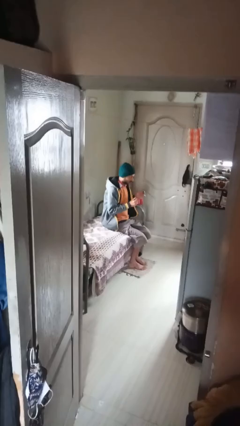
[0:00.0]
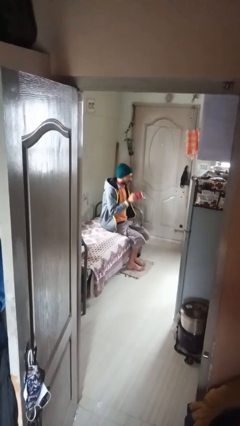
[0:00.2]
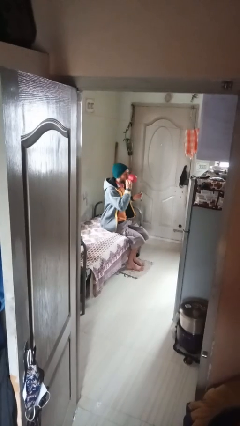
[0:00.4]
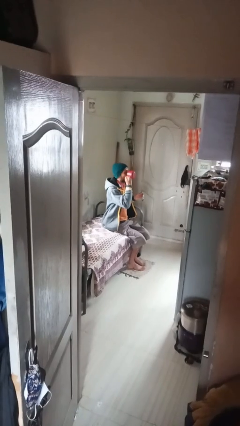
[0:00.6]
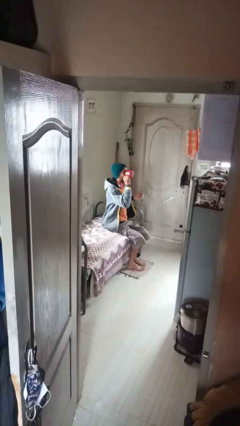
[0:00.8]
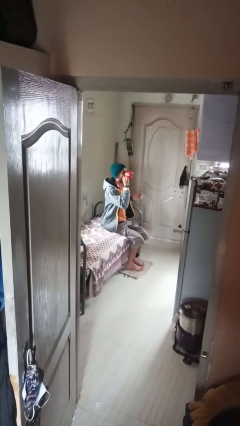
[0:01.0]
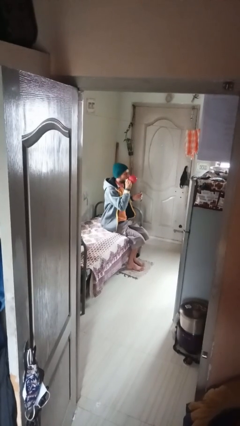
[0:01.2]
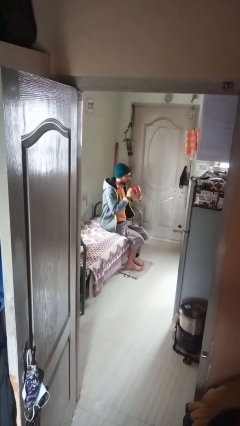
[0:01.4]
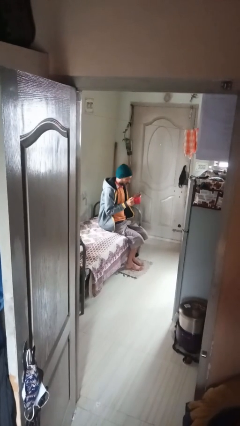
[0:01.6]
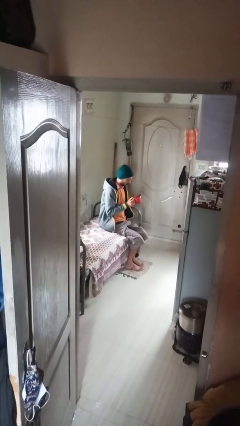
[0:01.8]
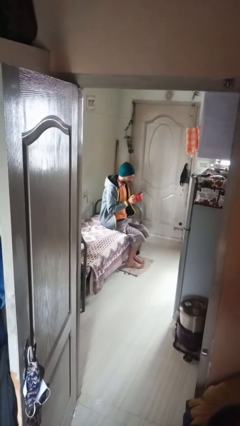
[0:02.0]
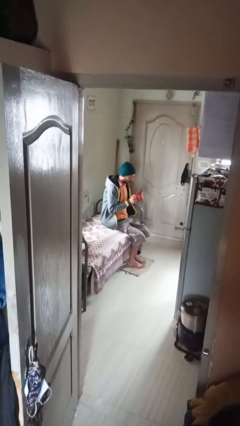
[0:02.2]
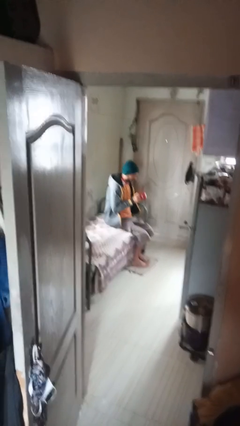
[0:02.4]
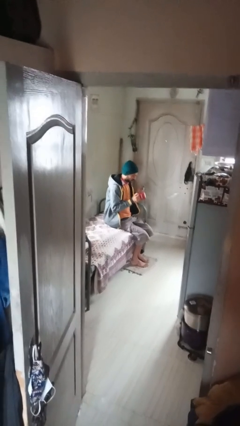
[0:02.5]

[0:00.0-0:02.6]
person drinks from mug

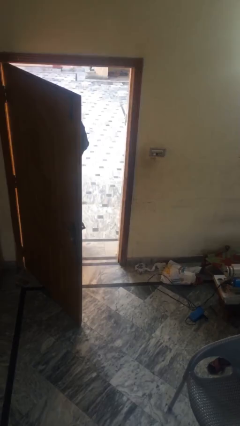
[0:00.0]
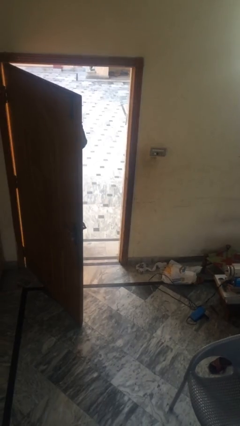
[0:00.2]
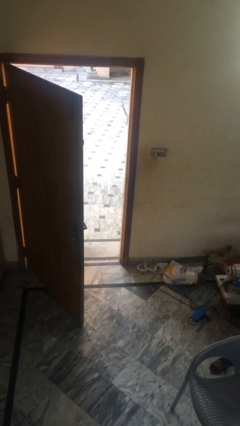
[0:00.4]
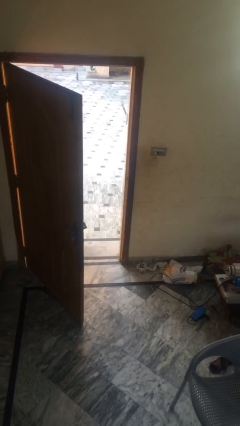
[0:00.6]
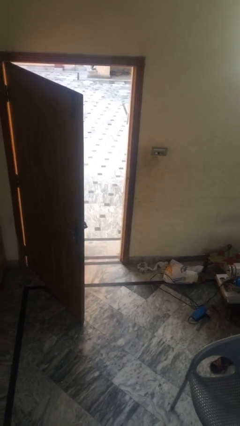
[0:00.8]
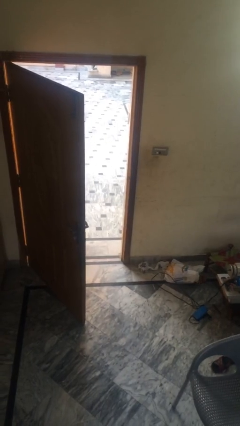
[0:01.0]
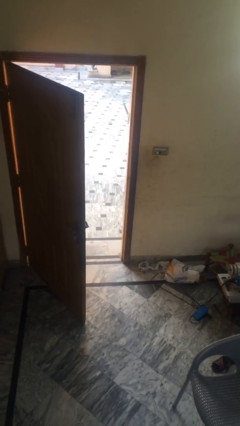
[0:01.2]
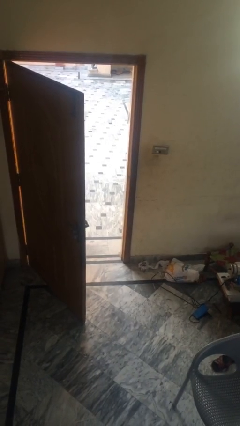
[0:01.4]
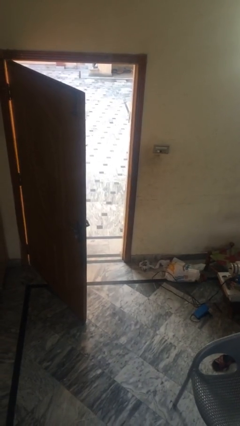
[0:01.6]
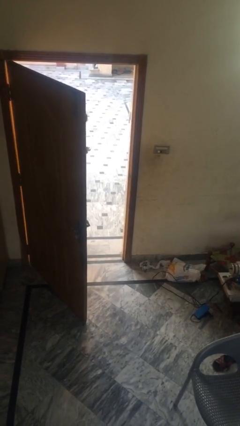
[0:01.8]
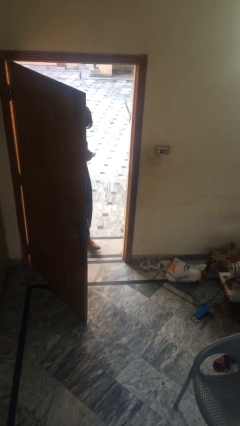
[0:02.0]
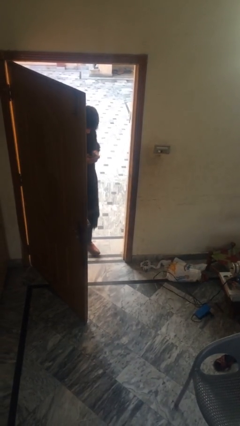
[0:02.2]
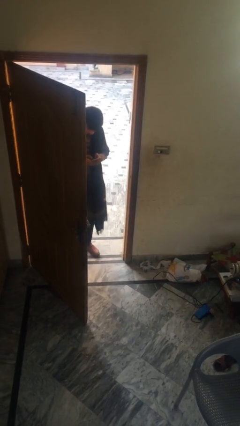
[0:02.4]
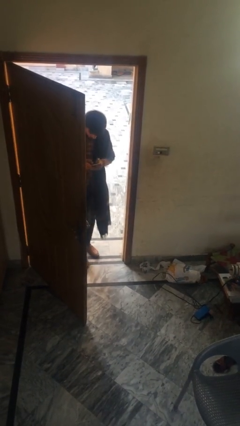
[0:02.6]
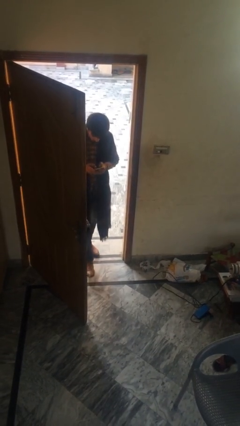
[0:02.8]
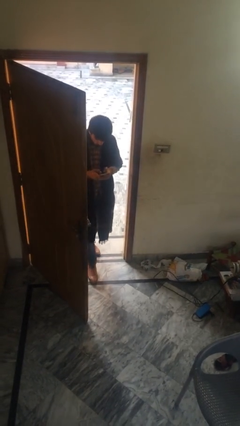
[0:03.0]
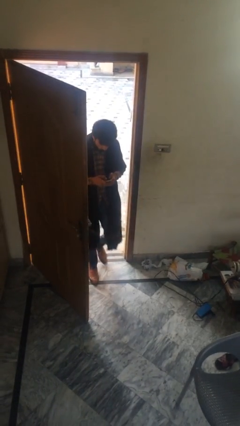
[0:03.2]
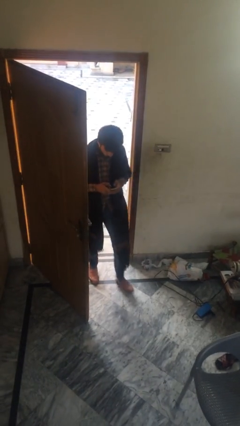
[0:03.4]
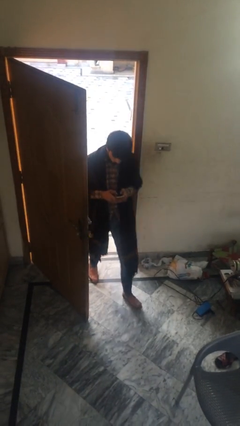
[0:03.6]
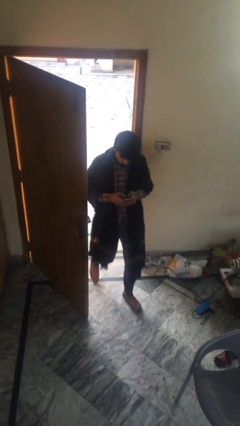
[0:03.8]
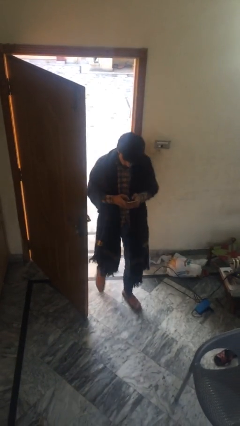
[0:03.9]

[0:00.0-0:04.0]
person enters scene through structure

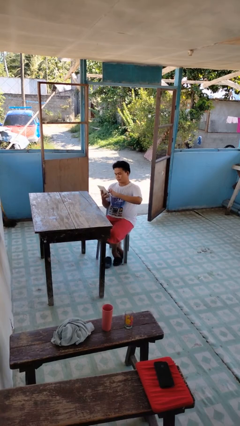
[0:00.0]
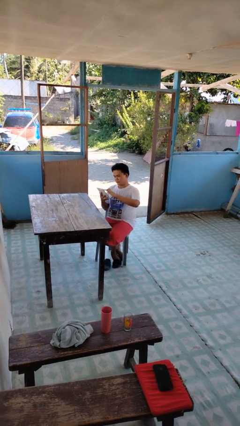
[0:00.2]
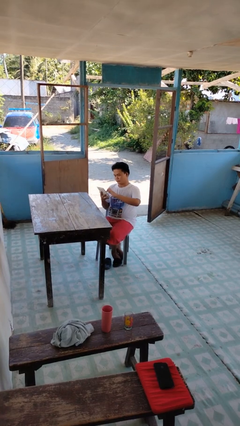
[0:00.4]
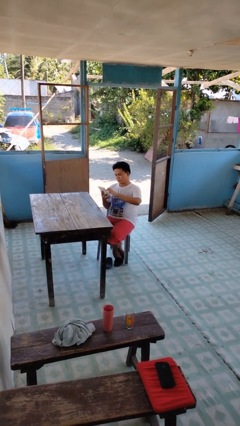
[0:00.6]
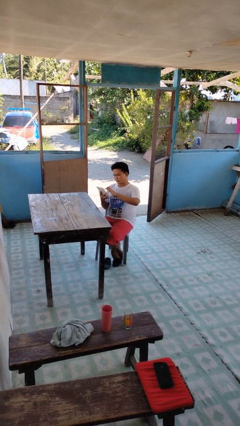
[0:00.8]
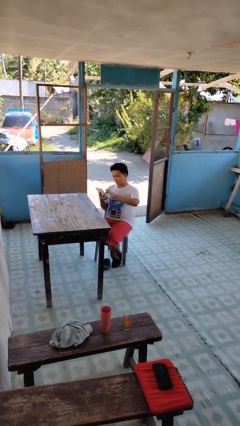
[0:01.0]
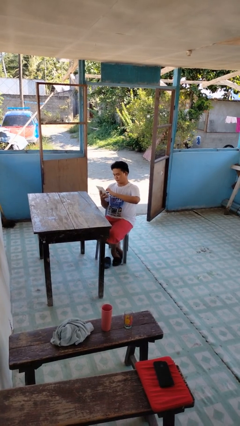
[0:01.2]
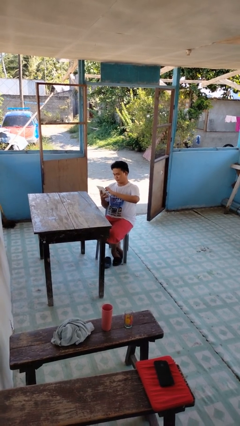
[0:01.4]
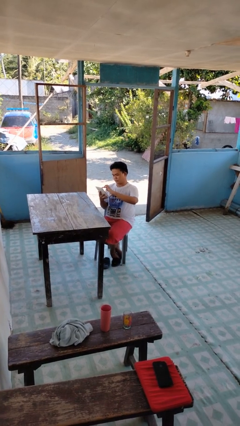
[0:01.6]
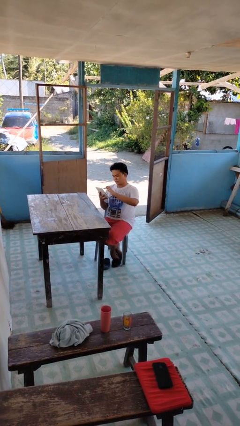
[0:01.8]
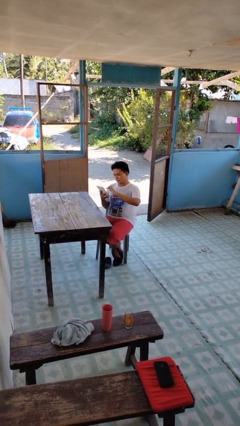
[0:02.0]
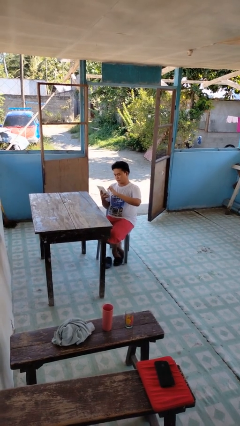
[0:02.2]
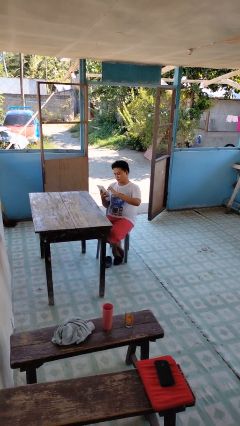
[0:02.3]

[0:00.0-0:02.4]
person interacts with tablet

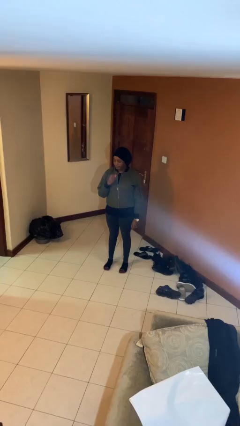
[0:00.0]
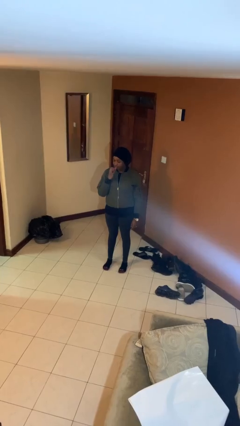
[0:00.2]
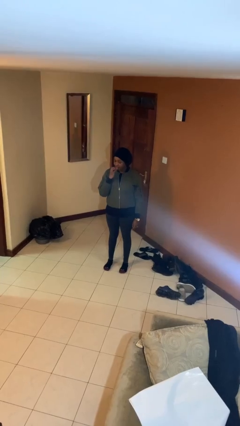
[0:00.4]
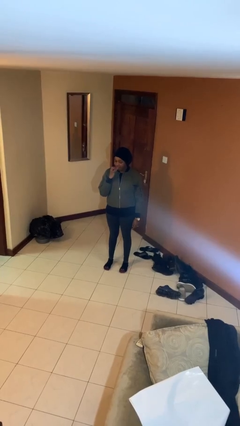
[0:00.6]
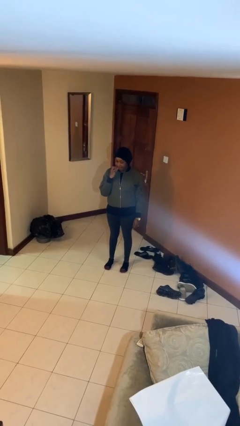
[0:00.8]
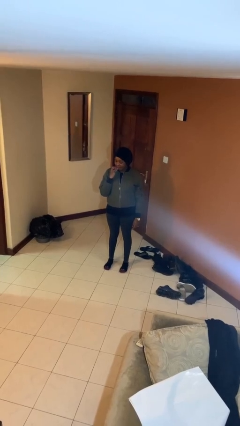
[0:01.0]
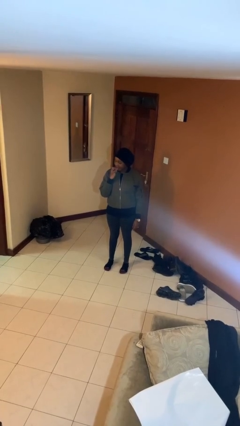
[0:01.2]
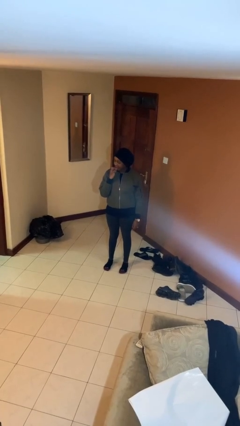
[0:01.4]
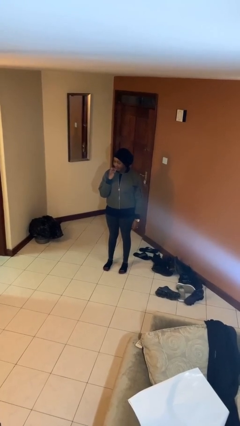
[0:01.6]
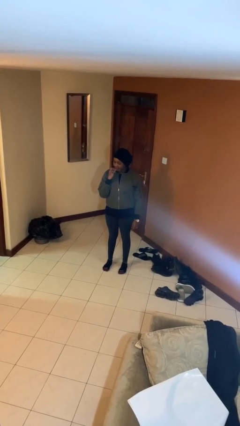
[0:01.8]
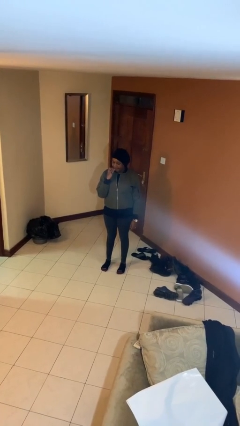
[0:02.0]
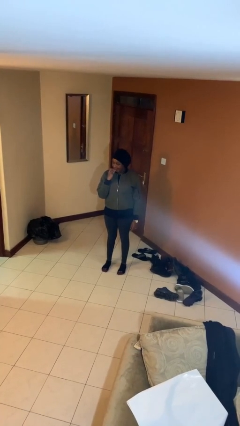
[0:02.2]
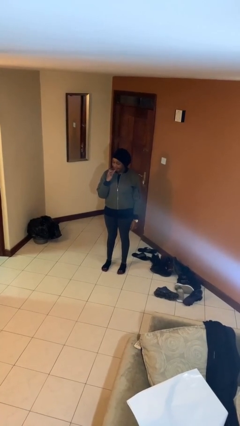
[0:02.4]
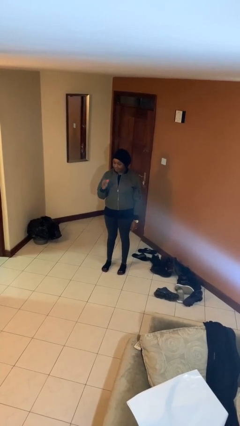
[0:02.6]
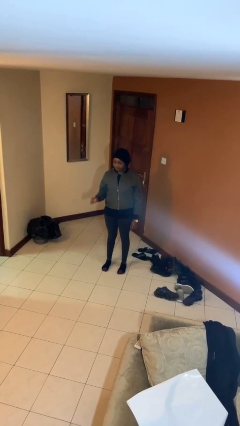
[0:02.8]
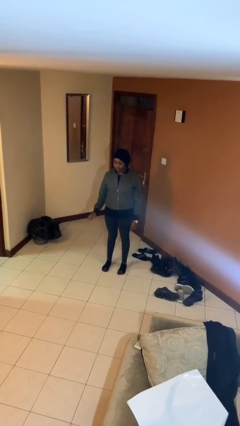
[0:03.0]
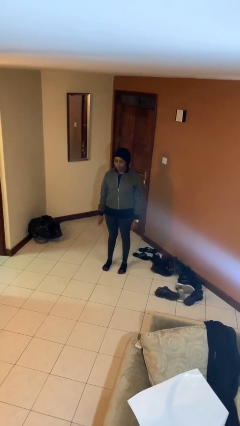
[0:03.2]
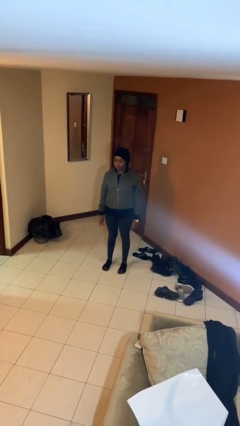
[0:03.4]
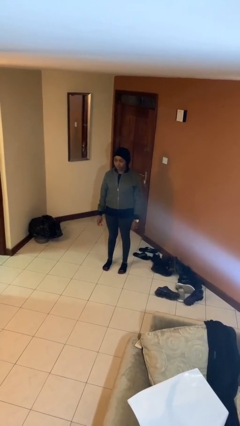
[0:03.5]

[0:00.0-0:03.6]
person applies lip makeup

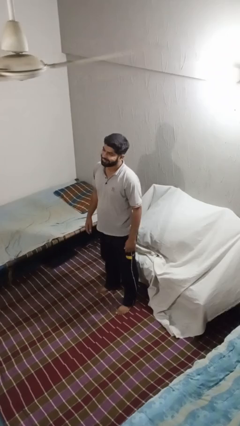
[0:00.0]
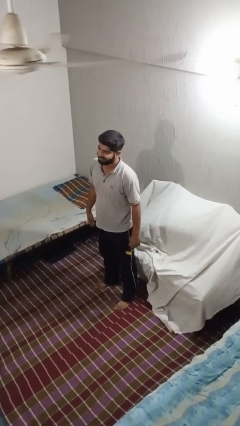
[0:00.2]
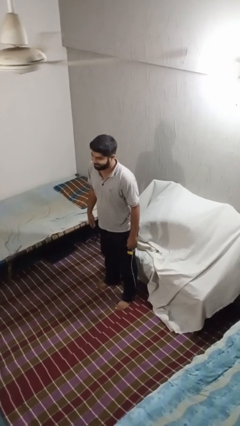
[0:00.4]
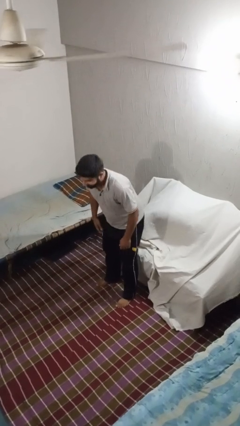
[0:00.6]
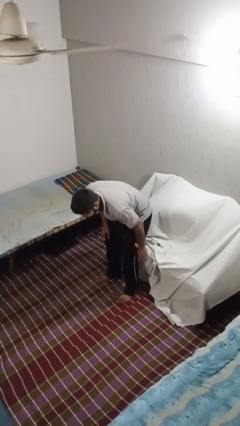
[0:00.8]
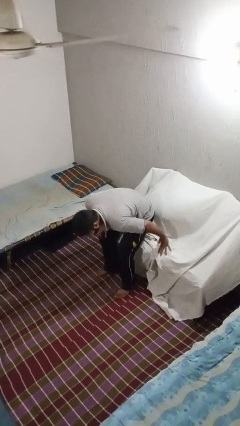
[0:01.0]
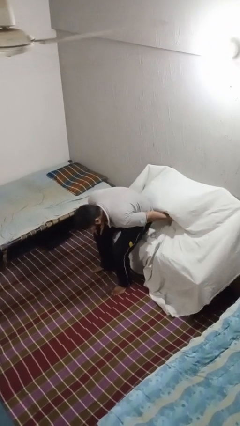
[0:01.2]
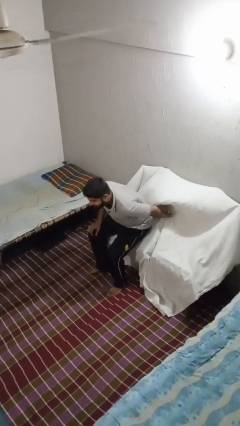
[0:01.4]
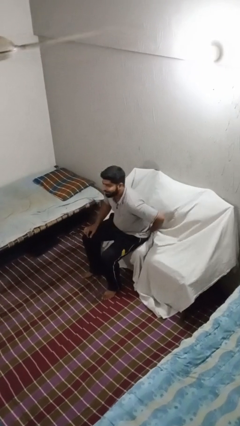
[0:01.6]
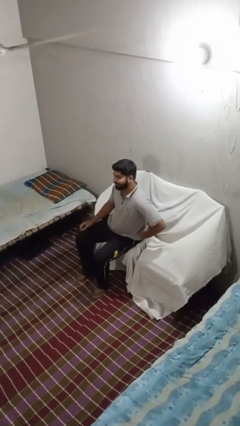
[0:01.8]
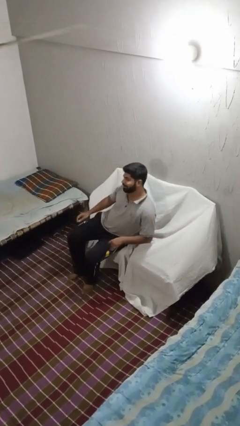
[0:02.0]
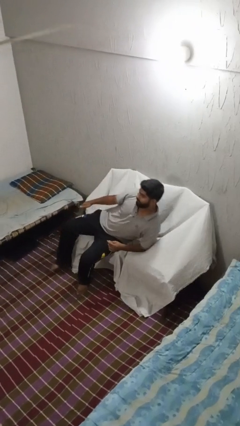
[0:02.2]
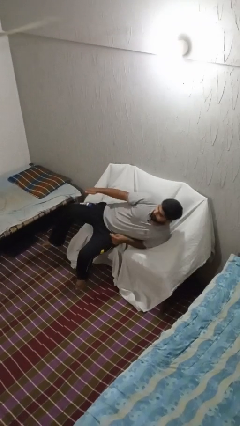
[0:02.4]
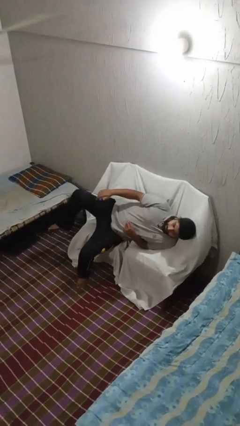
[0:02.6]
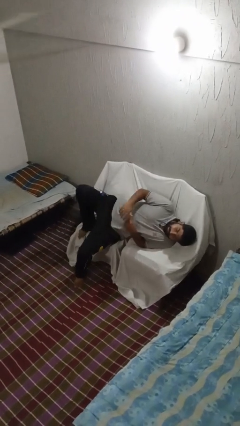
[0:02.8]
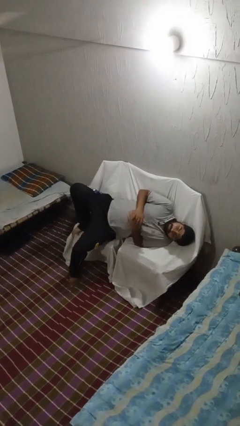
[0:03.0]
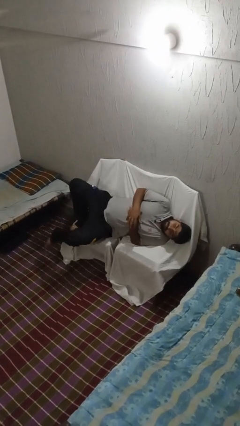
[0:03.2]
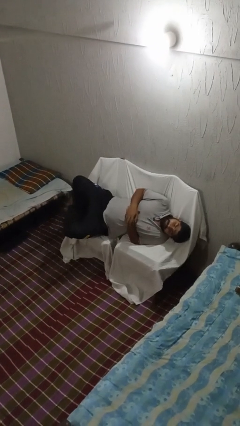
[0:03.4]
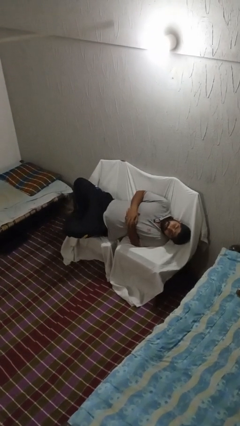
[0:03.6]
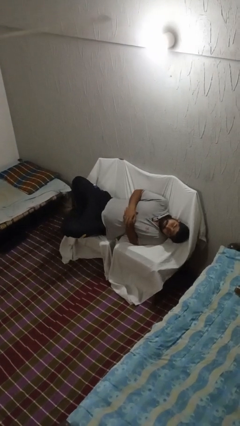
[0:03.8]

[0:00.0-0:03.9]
person lies down on couch

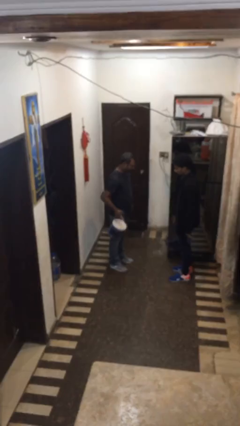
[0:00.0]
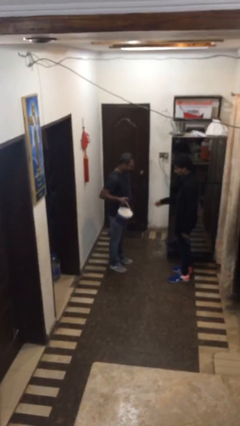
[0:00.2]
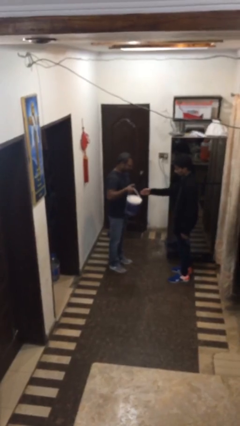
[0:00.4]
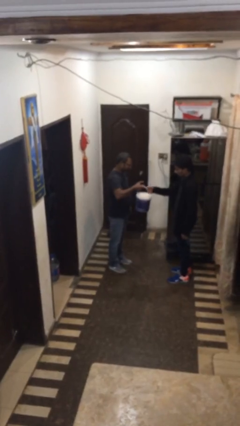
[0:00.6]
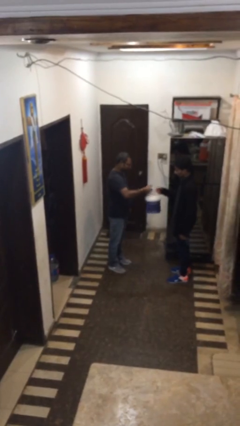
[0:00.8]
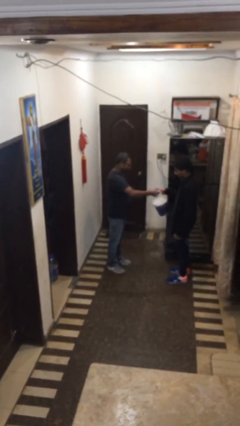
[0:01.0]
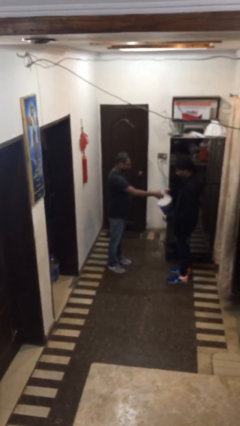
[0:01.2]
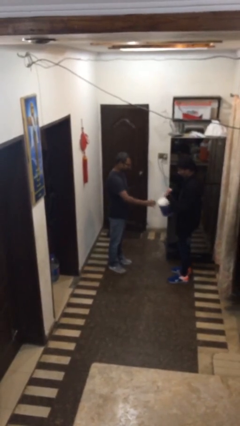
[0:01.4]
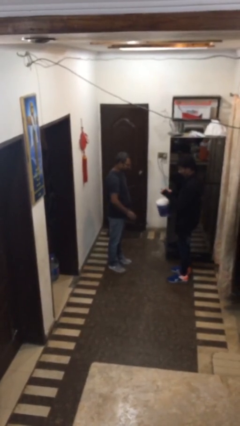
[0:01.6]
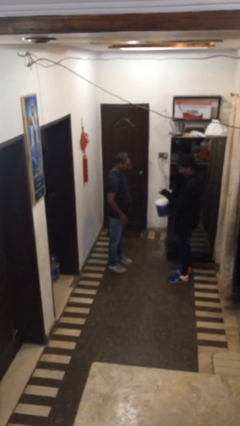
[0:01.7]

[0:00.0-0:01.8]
person transfers object to person
